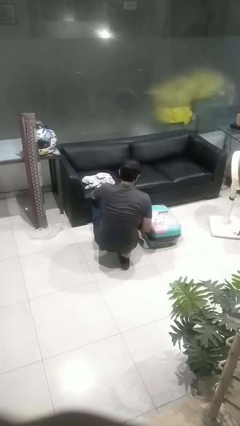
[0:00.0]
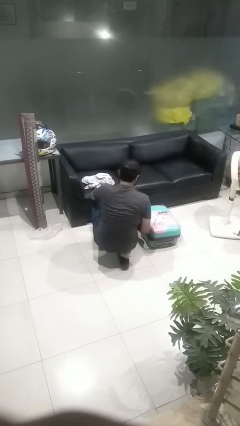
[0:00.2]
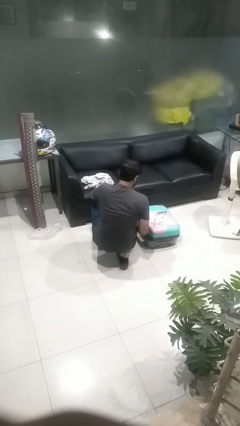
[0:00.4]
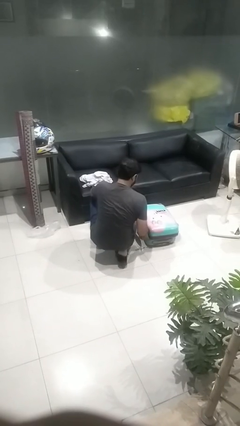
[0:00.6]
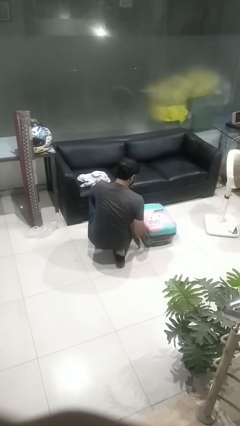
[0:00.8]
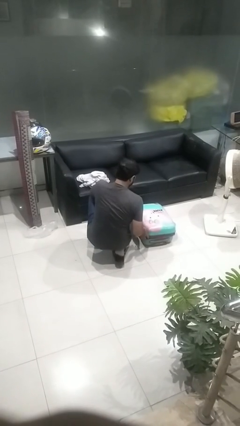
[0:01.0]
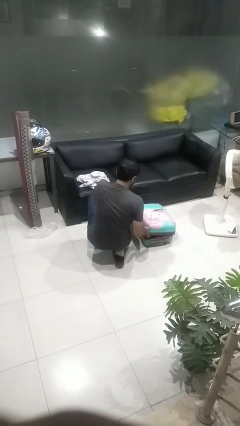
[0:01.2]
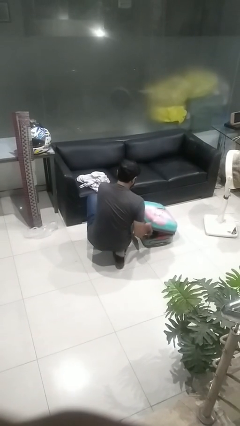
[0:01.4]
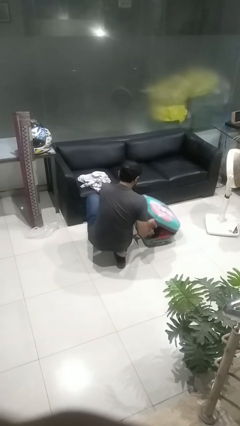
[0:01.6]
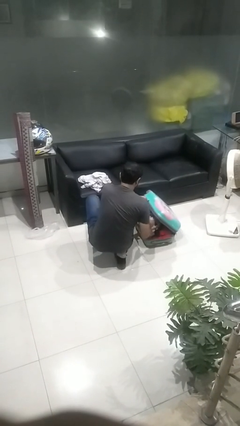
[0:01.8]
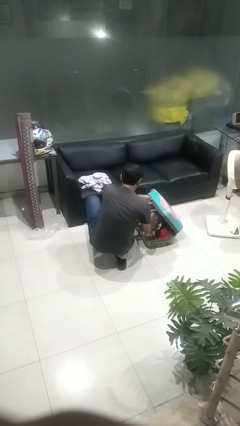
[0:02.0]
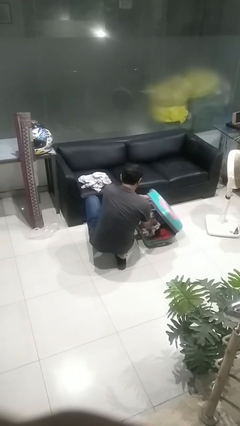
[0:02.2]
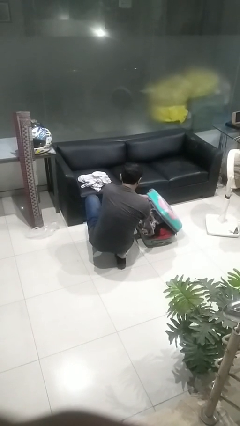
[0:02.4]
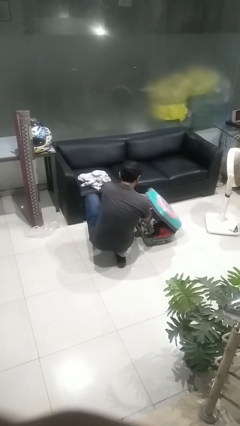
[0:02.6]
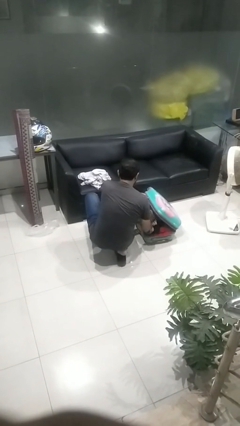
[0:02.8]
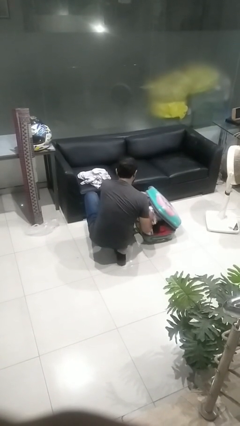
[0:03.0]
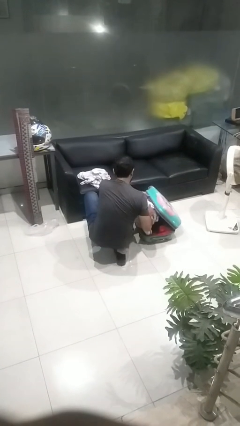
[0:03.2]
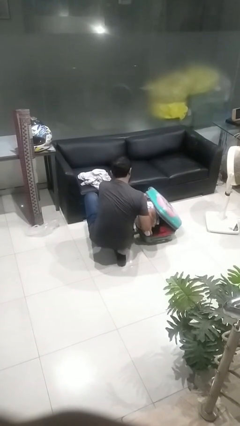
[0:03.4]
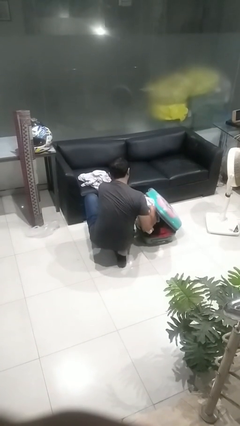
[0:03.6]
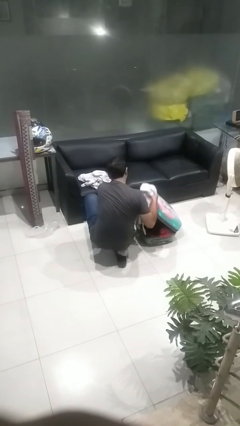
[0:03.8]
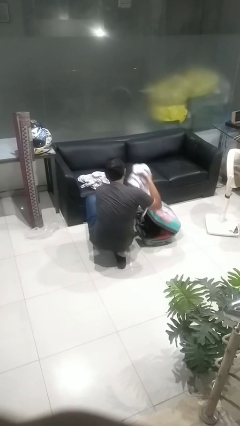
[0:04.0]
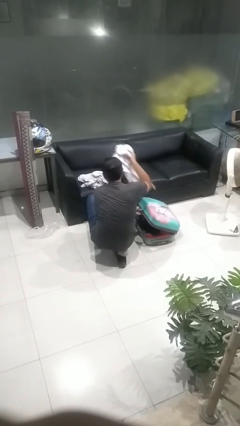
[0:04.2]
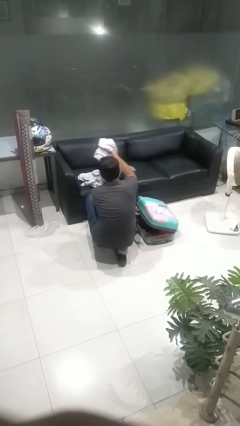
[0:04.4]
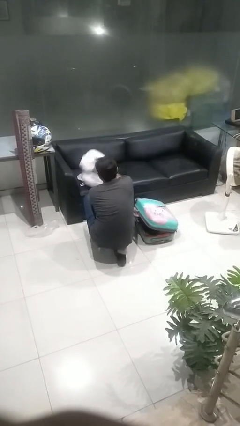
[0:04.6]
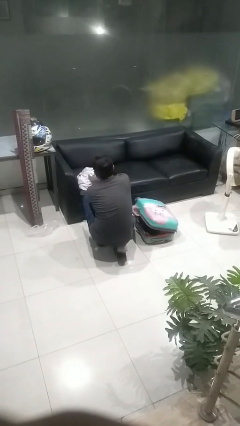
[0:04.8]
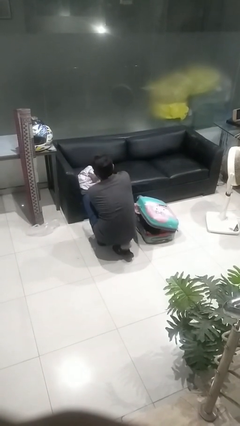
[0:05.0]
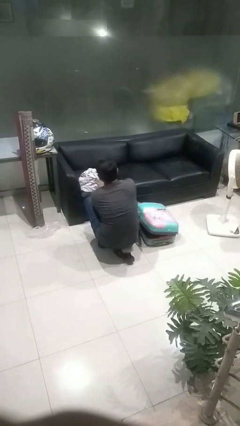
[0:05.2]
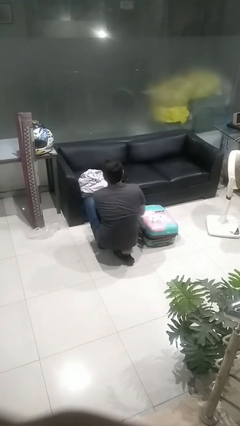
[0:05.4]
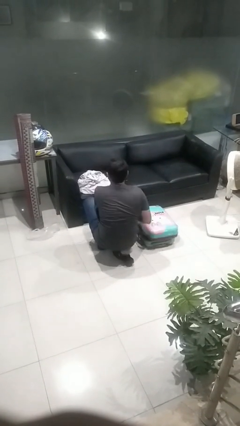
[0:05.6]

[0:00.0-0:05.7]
person unloads clothes from suitcase

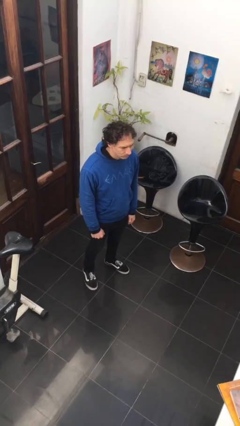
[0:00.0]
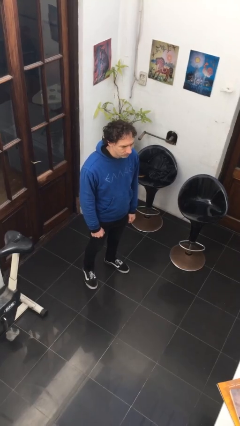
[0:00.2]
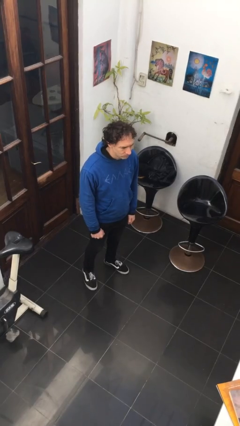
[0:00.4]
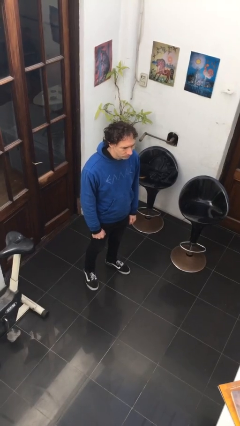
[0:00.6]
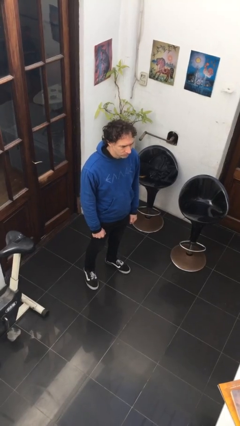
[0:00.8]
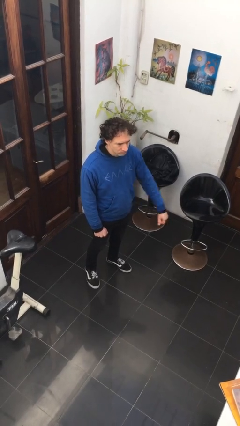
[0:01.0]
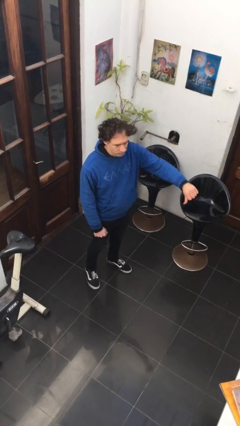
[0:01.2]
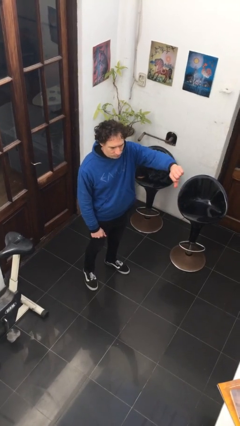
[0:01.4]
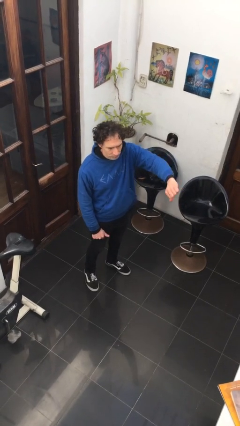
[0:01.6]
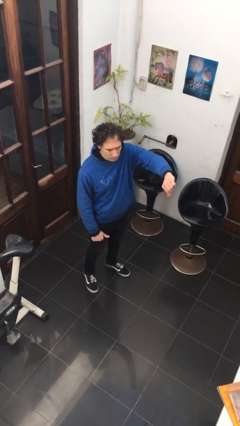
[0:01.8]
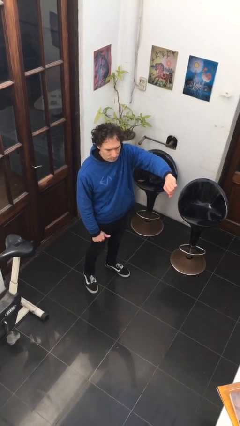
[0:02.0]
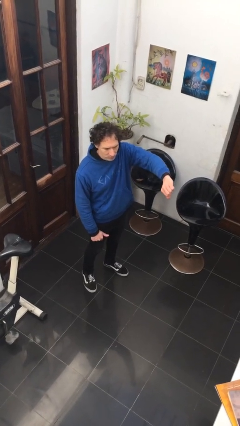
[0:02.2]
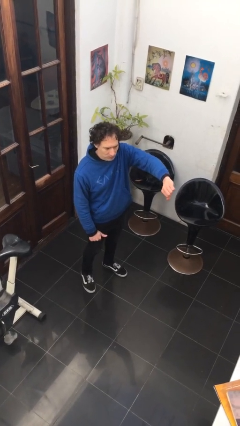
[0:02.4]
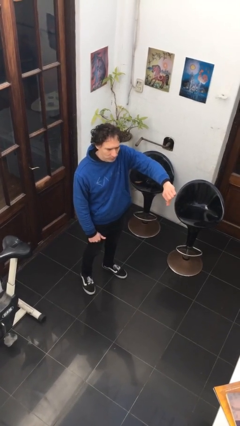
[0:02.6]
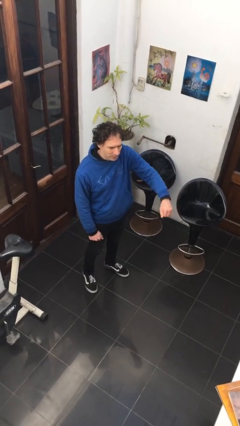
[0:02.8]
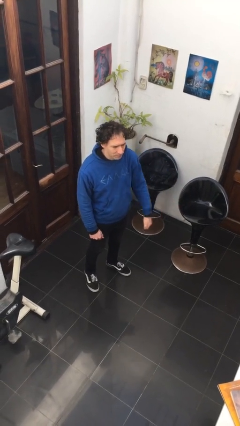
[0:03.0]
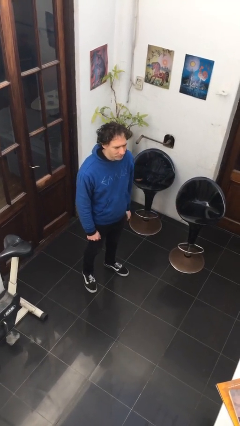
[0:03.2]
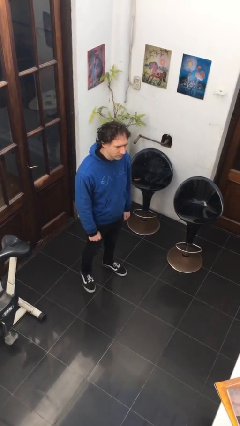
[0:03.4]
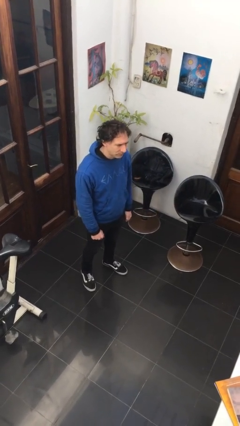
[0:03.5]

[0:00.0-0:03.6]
person gestures thumbs down

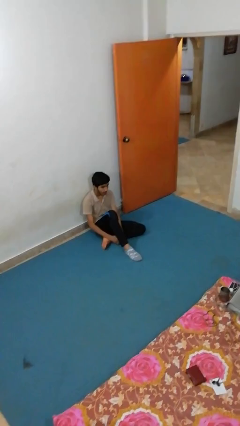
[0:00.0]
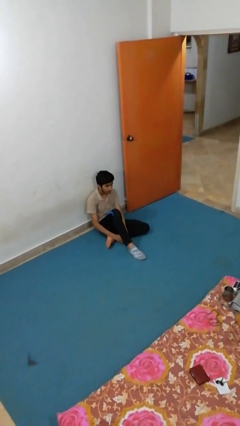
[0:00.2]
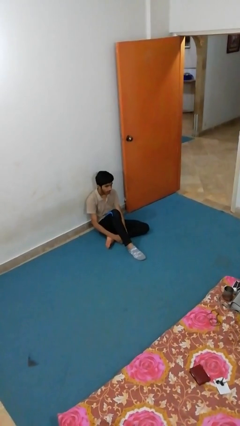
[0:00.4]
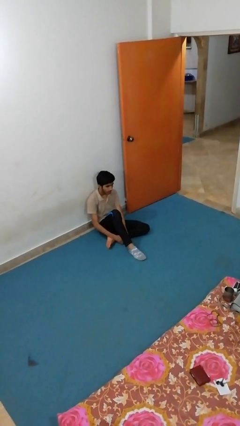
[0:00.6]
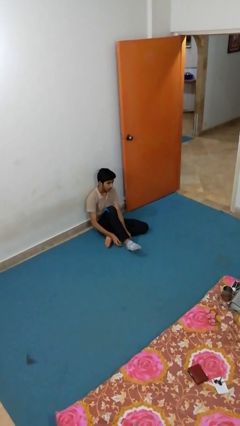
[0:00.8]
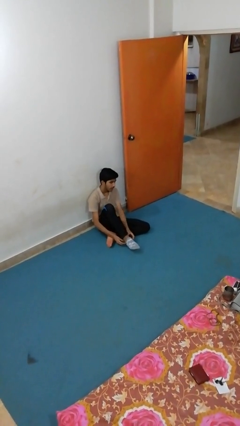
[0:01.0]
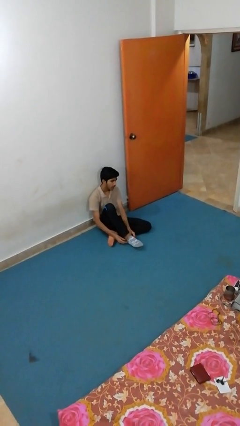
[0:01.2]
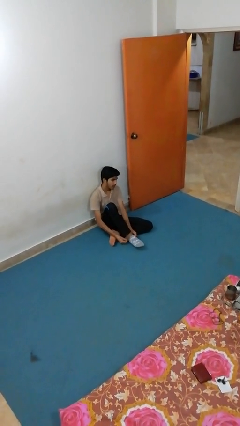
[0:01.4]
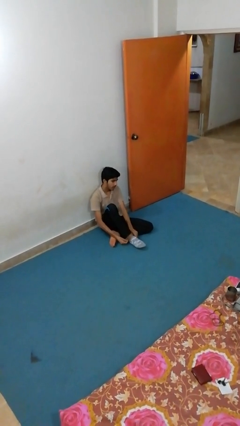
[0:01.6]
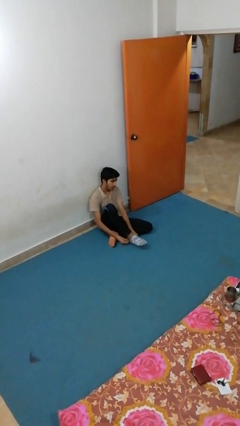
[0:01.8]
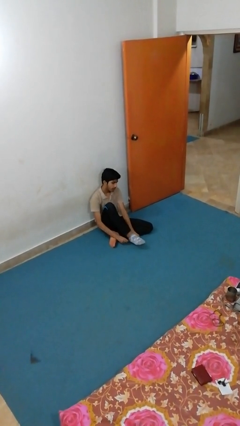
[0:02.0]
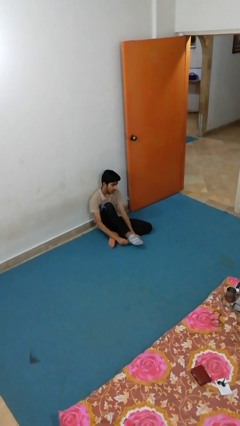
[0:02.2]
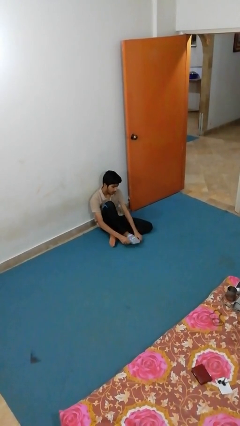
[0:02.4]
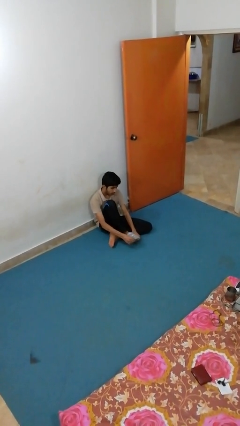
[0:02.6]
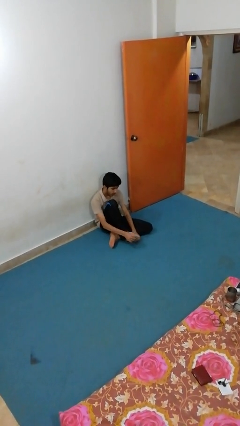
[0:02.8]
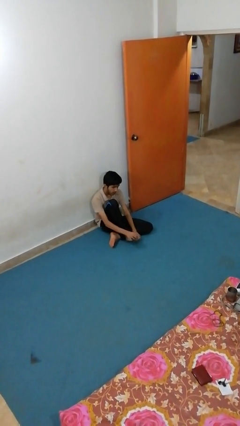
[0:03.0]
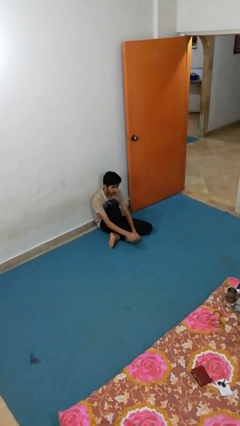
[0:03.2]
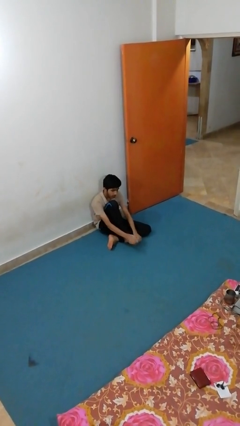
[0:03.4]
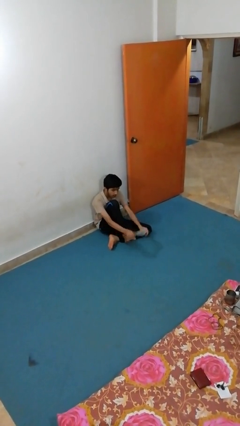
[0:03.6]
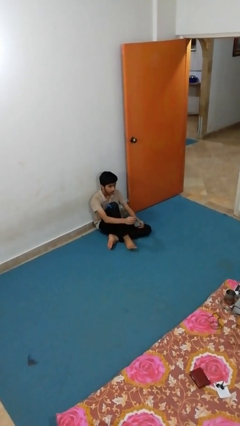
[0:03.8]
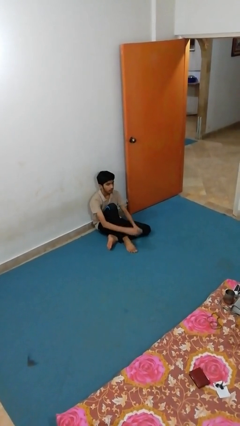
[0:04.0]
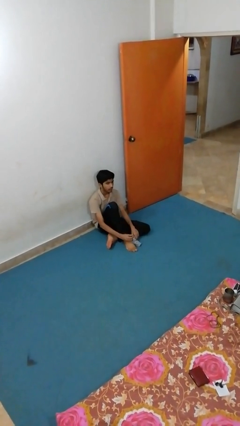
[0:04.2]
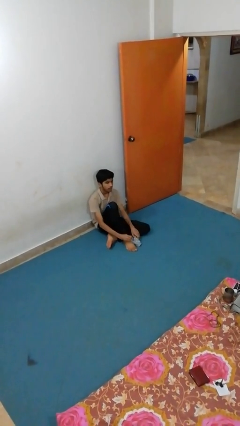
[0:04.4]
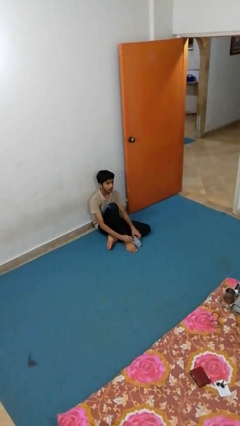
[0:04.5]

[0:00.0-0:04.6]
person takes off socks

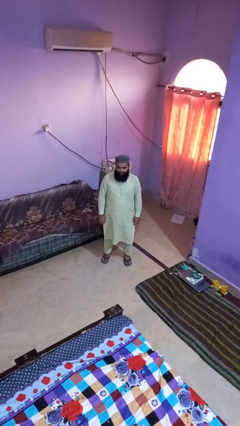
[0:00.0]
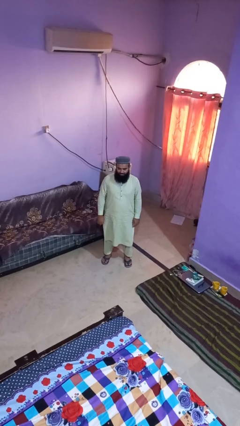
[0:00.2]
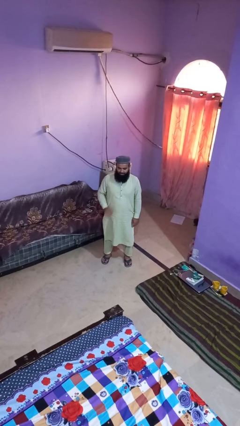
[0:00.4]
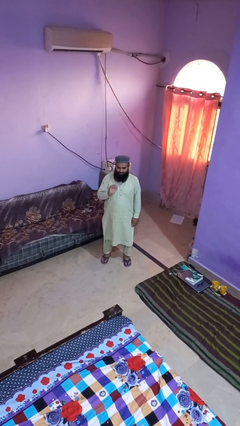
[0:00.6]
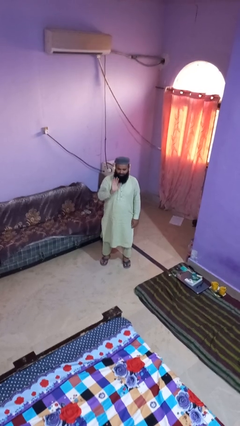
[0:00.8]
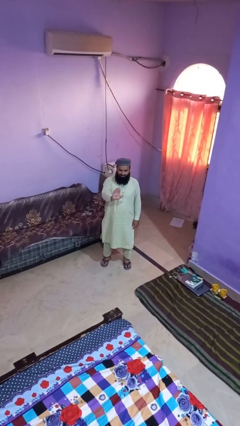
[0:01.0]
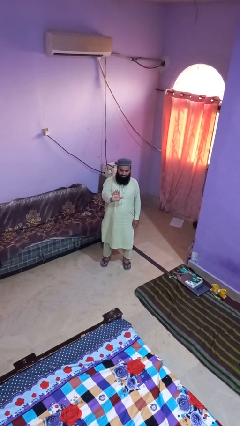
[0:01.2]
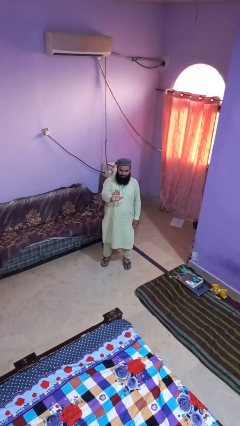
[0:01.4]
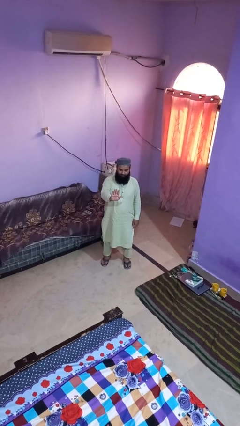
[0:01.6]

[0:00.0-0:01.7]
person gestures stop

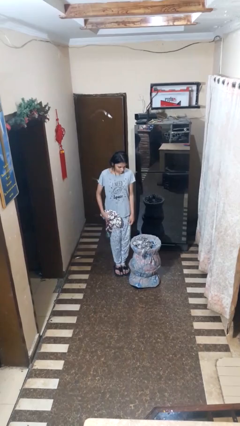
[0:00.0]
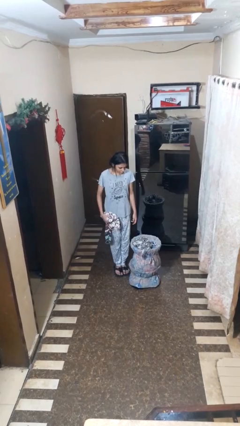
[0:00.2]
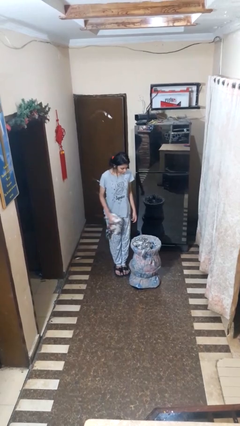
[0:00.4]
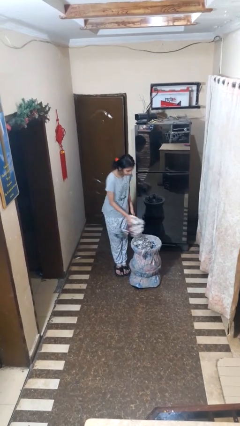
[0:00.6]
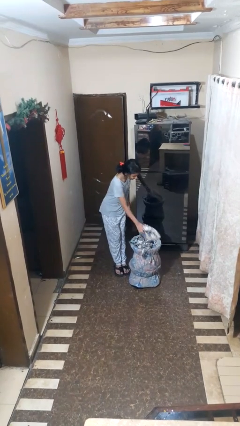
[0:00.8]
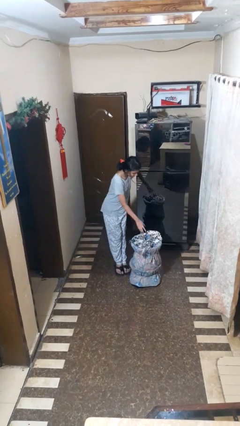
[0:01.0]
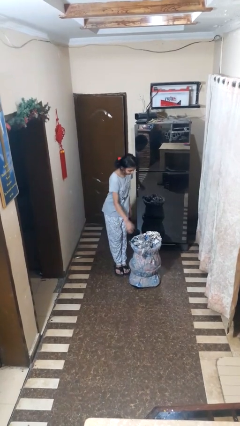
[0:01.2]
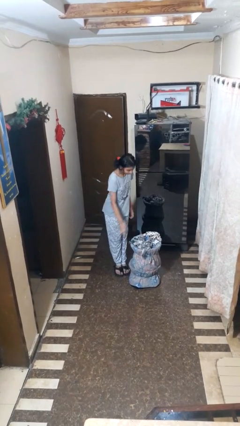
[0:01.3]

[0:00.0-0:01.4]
person takes object from basket

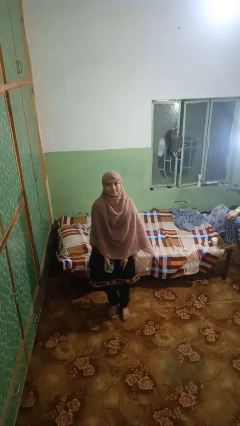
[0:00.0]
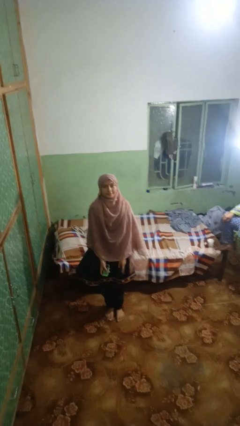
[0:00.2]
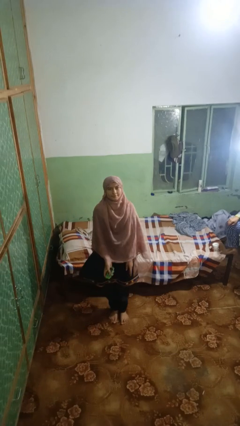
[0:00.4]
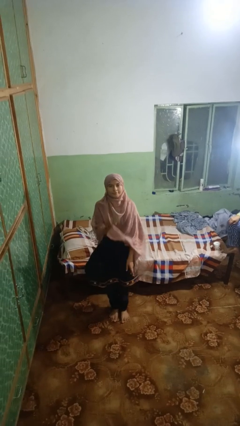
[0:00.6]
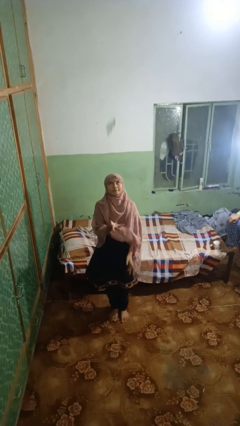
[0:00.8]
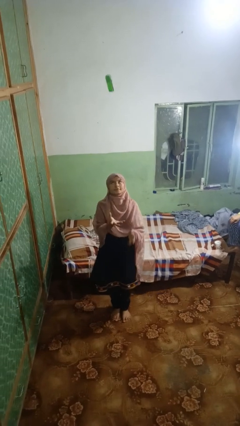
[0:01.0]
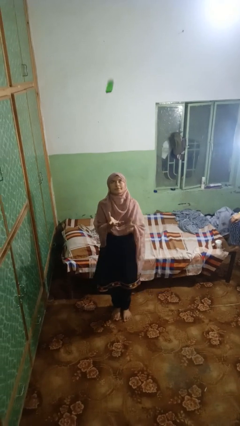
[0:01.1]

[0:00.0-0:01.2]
person throws object into air
